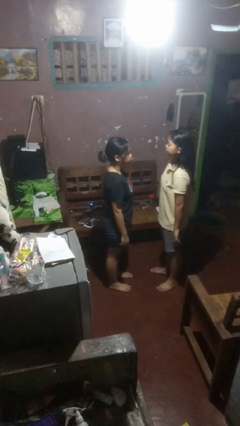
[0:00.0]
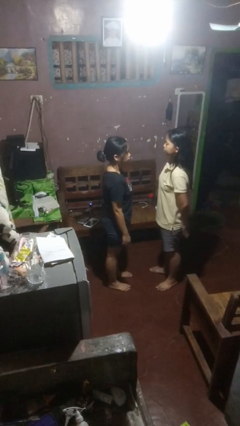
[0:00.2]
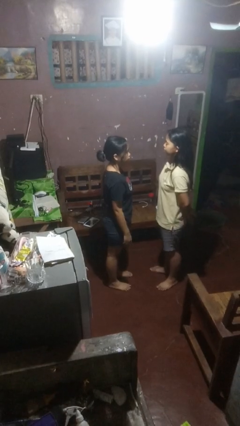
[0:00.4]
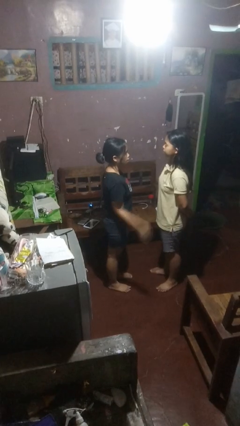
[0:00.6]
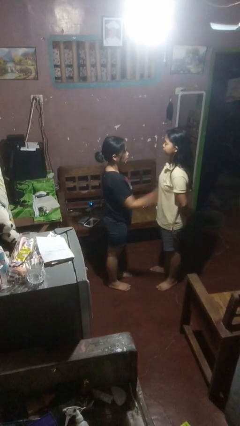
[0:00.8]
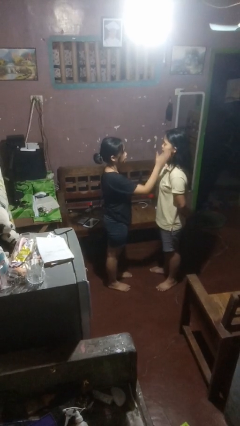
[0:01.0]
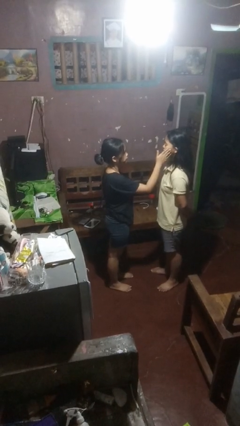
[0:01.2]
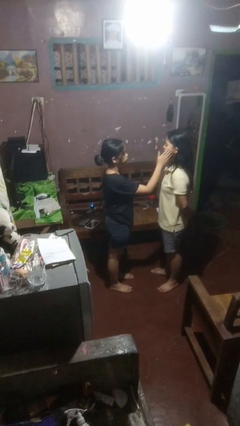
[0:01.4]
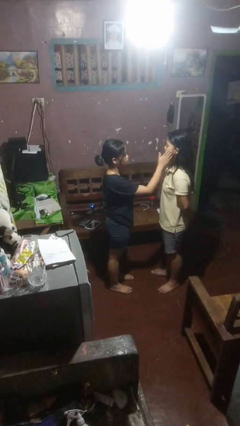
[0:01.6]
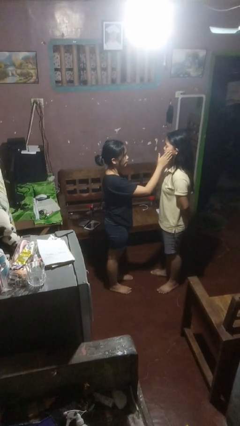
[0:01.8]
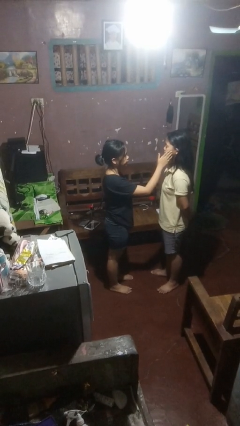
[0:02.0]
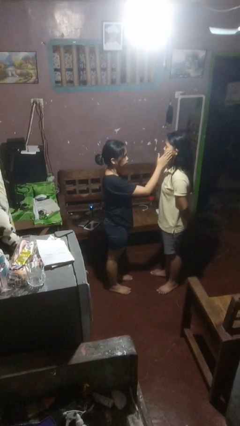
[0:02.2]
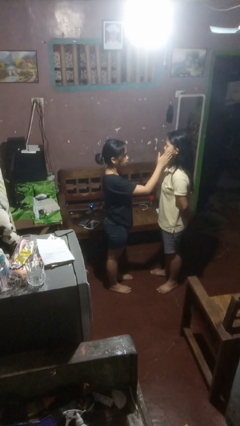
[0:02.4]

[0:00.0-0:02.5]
person touches face of person

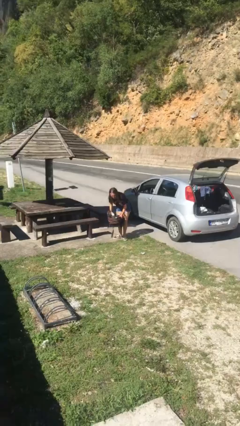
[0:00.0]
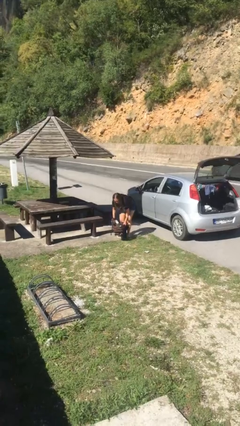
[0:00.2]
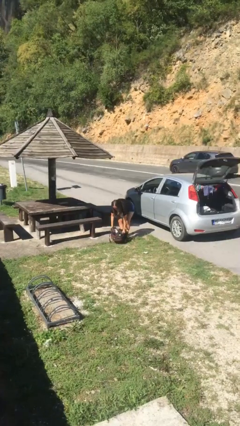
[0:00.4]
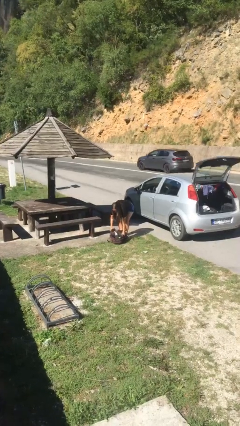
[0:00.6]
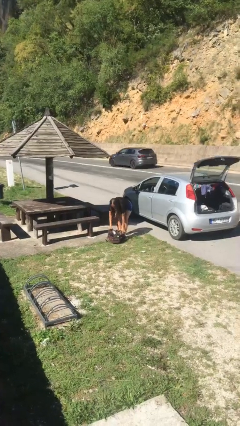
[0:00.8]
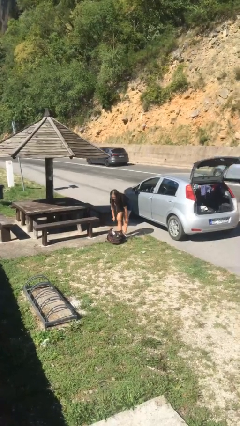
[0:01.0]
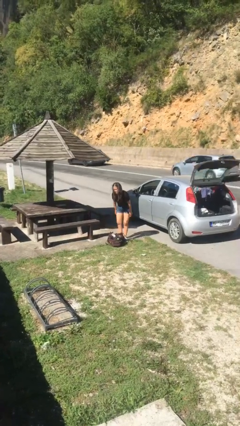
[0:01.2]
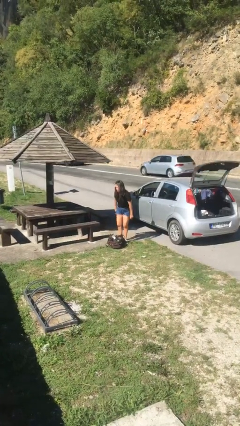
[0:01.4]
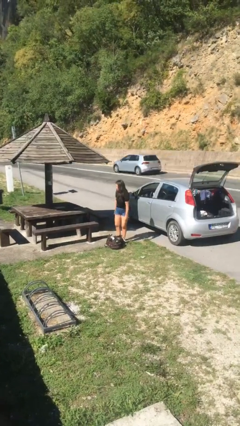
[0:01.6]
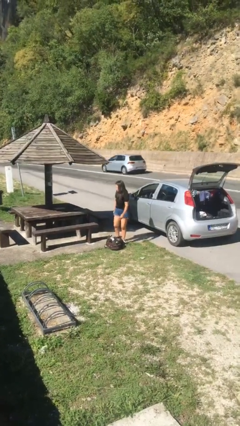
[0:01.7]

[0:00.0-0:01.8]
person puts down object on floor

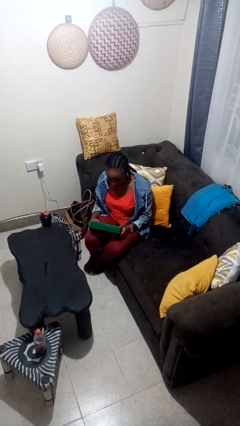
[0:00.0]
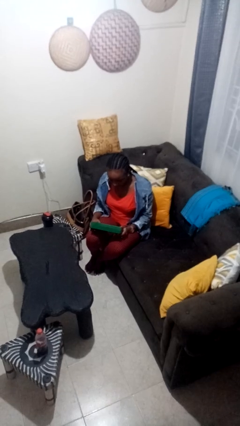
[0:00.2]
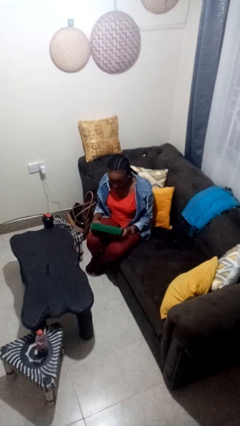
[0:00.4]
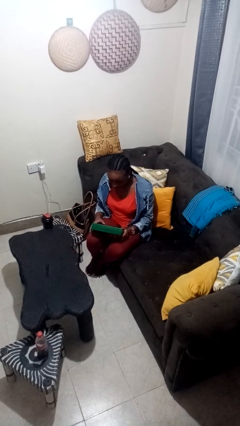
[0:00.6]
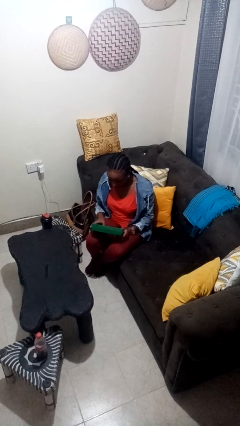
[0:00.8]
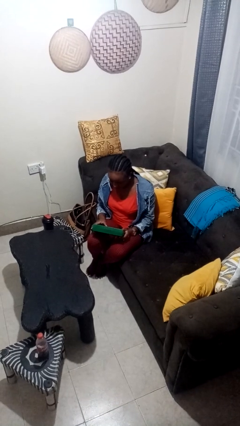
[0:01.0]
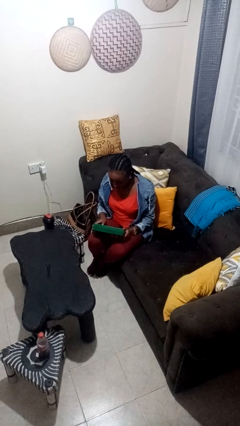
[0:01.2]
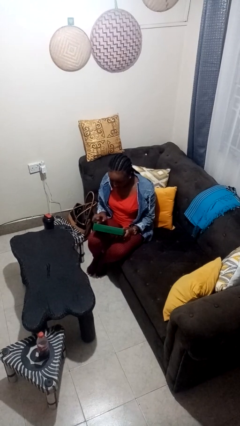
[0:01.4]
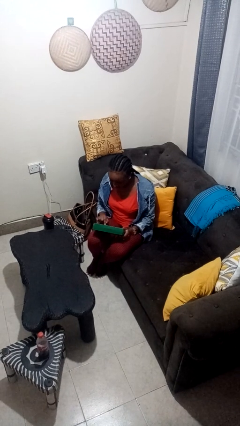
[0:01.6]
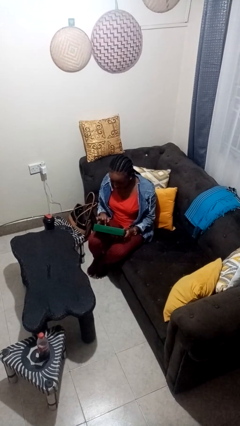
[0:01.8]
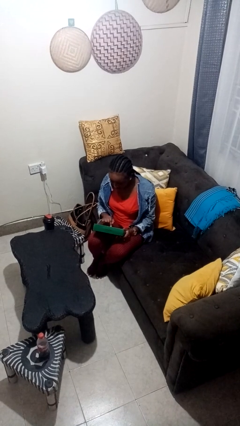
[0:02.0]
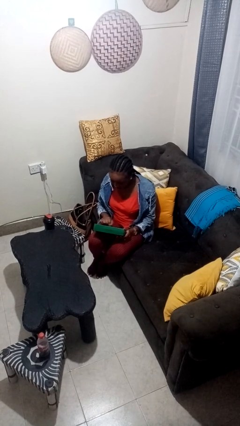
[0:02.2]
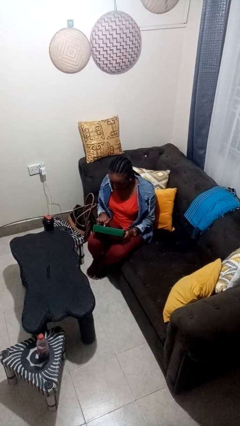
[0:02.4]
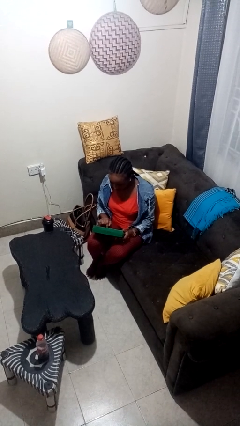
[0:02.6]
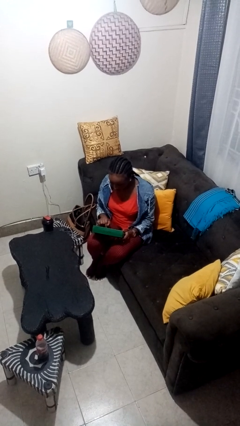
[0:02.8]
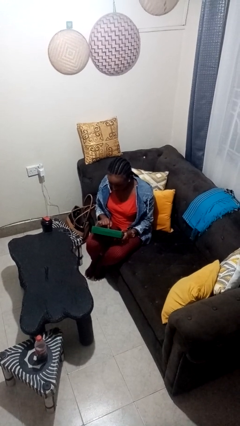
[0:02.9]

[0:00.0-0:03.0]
person interacts with handheld game

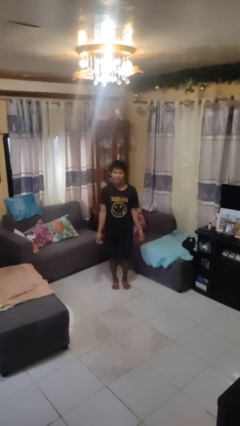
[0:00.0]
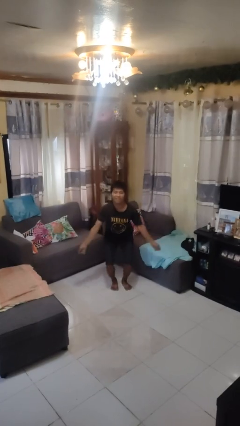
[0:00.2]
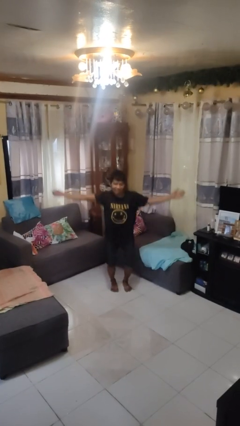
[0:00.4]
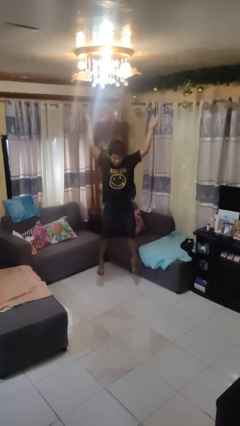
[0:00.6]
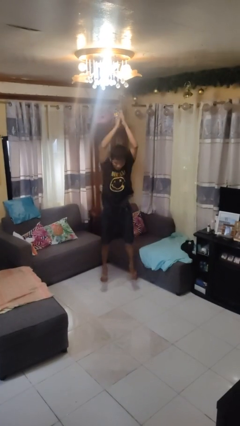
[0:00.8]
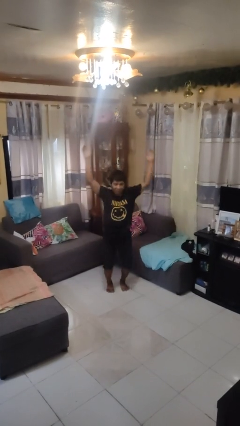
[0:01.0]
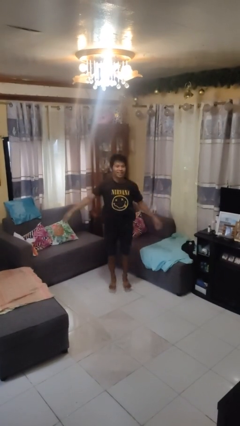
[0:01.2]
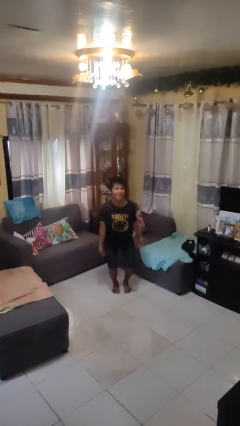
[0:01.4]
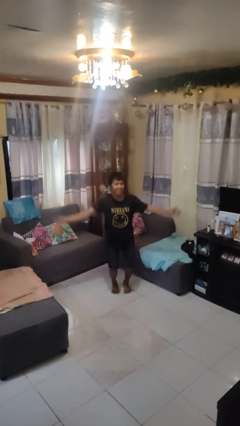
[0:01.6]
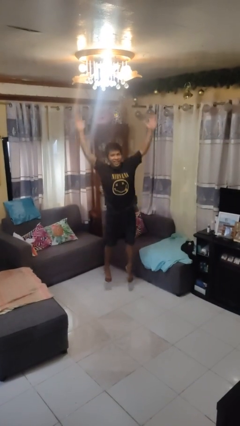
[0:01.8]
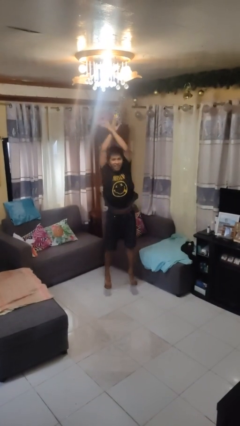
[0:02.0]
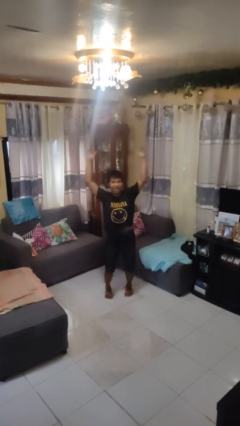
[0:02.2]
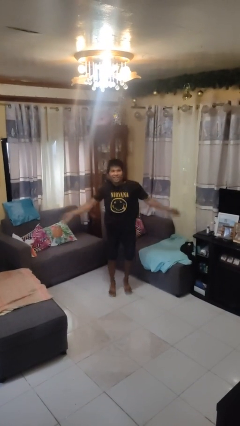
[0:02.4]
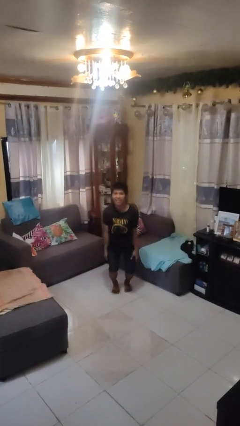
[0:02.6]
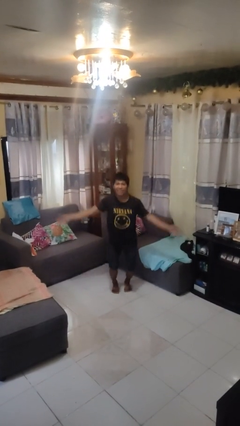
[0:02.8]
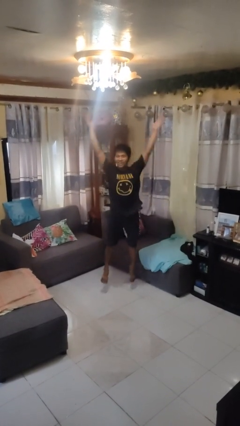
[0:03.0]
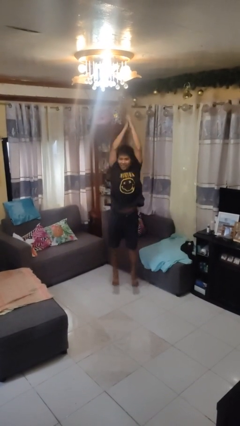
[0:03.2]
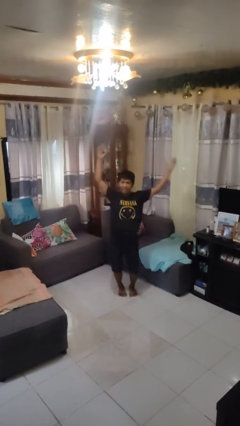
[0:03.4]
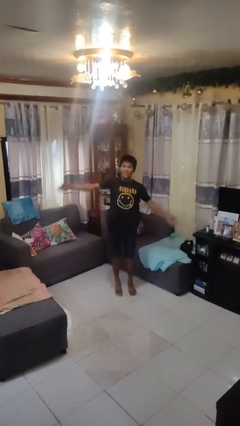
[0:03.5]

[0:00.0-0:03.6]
person exercises with jumping jacks

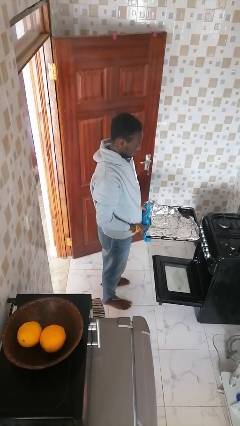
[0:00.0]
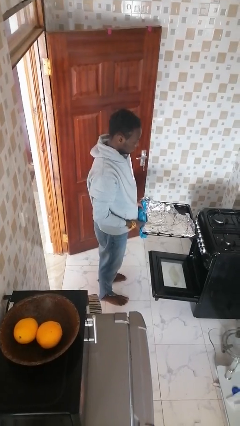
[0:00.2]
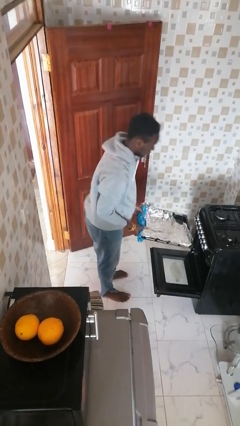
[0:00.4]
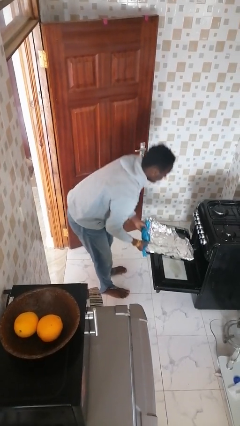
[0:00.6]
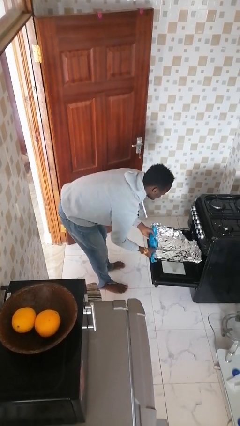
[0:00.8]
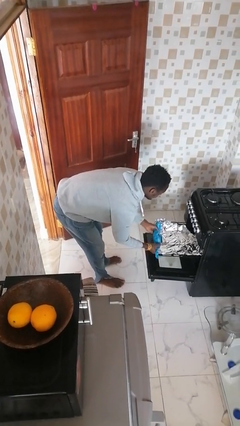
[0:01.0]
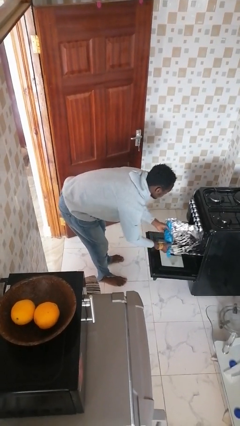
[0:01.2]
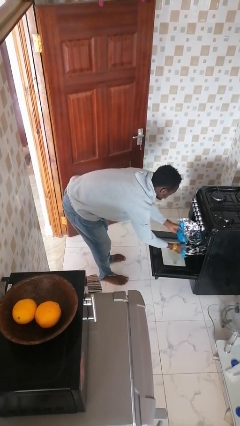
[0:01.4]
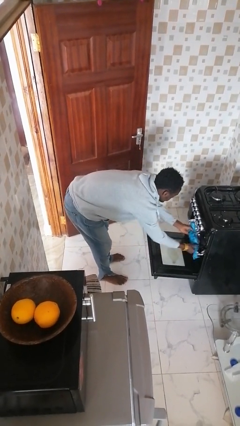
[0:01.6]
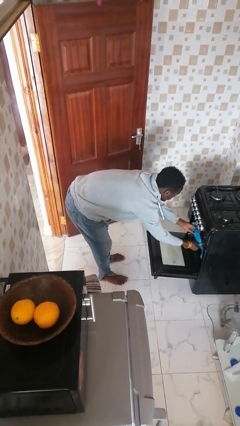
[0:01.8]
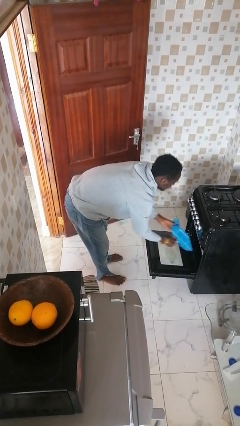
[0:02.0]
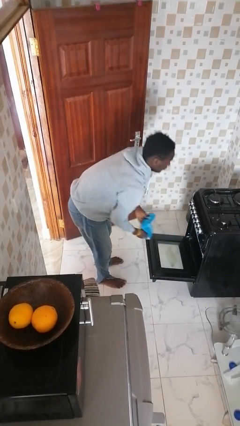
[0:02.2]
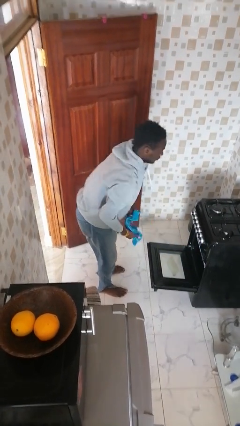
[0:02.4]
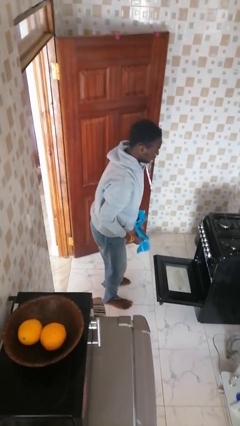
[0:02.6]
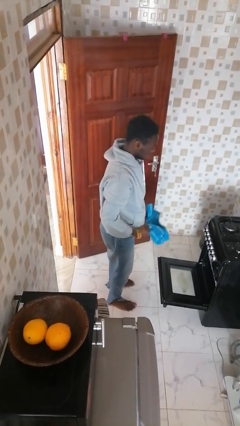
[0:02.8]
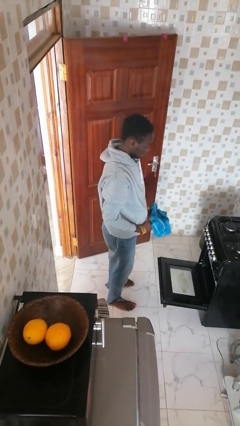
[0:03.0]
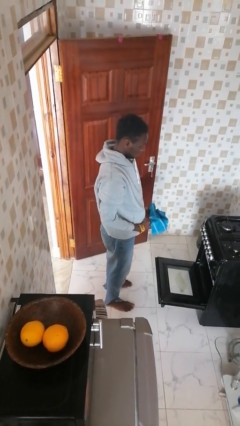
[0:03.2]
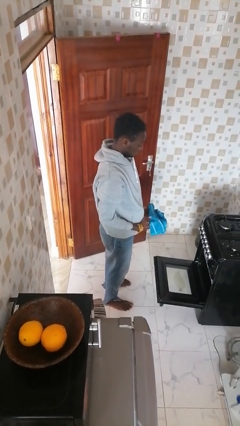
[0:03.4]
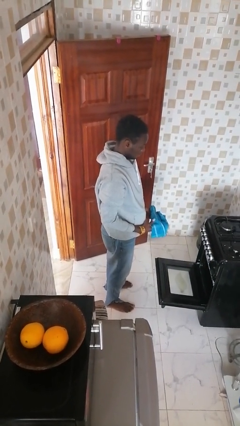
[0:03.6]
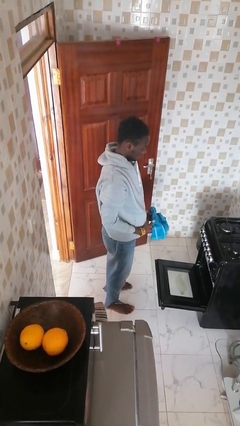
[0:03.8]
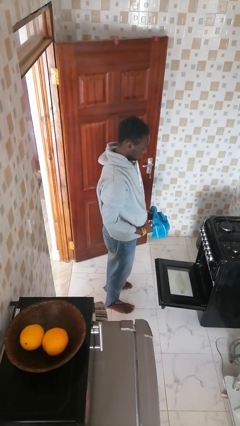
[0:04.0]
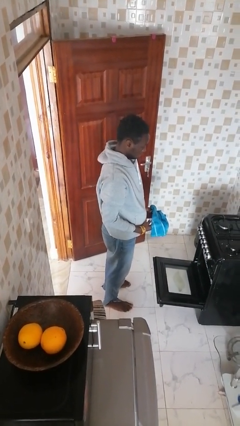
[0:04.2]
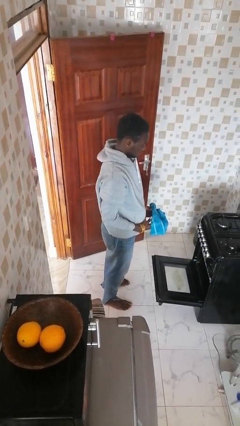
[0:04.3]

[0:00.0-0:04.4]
person puts object into oven

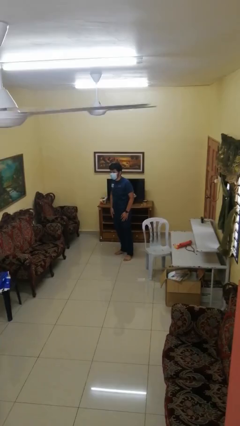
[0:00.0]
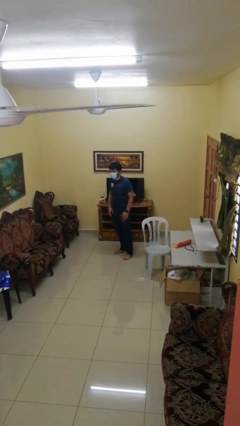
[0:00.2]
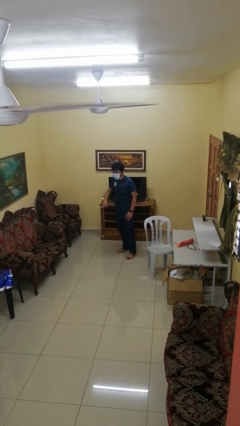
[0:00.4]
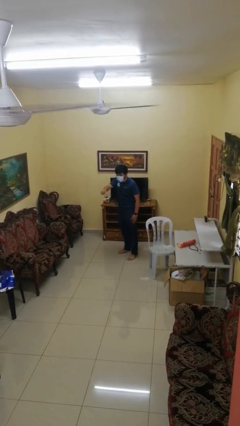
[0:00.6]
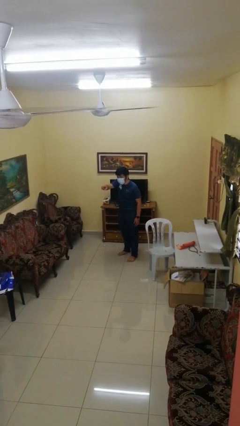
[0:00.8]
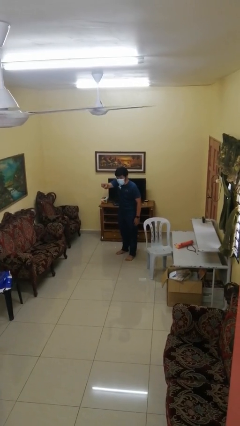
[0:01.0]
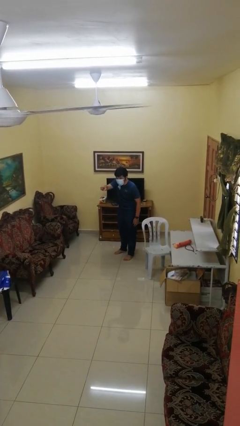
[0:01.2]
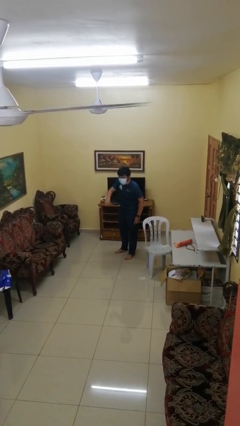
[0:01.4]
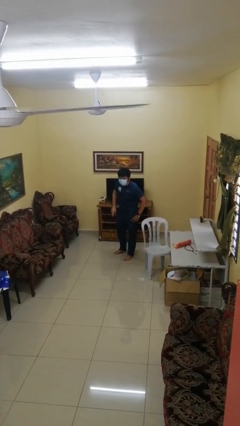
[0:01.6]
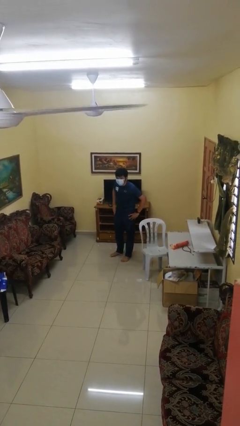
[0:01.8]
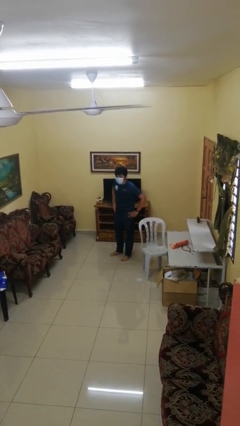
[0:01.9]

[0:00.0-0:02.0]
person points at person

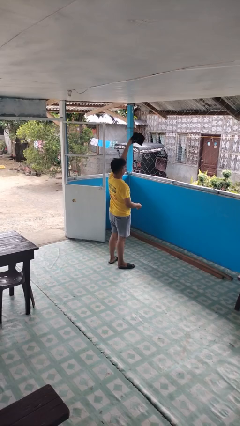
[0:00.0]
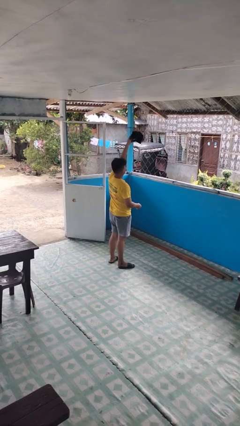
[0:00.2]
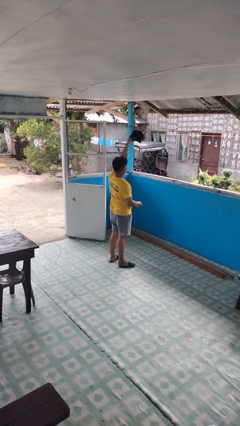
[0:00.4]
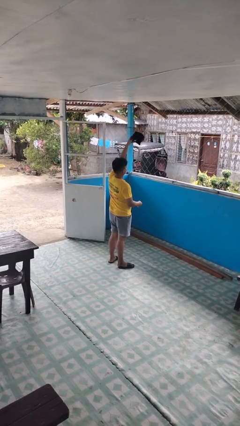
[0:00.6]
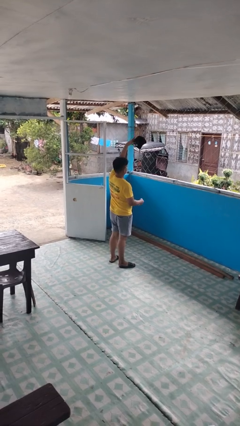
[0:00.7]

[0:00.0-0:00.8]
person drops object
